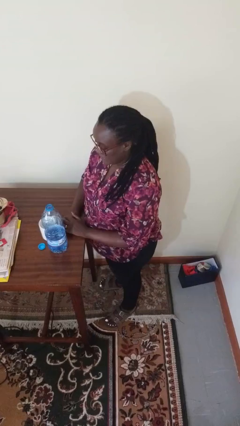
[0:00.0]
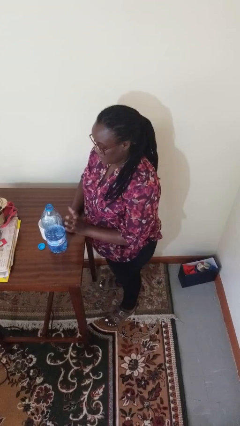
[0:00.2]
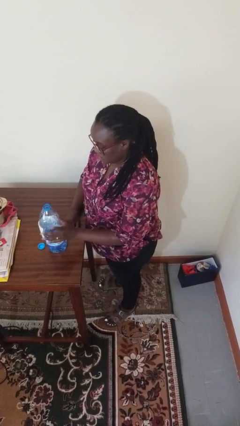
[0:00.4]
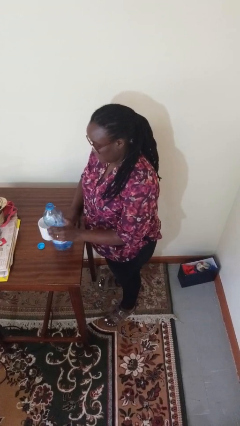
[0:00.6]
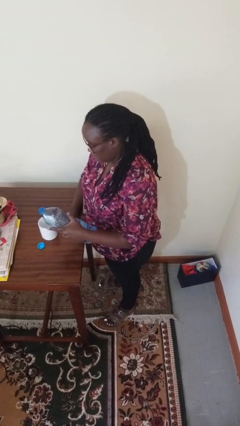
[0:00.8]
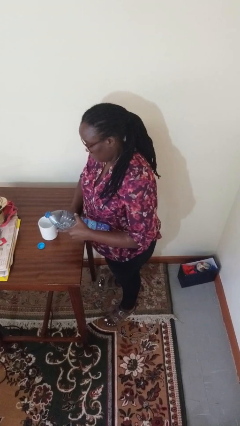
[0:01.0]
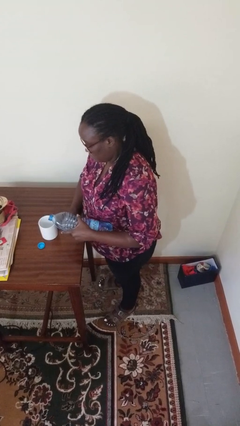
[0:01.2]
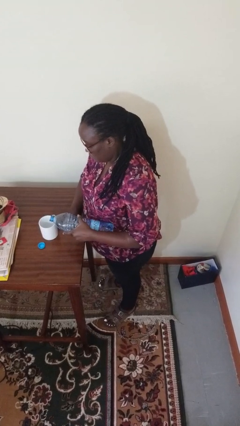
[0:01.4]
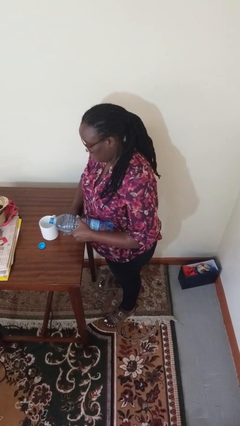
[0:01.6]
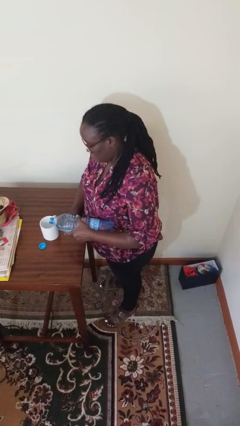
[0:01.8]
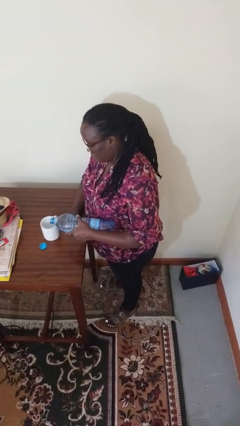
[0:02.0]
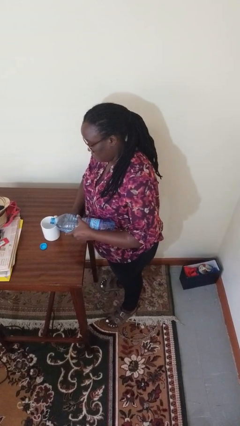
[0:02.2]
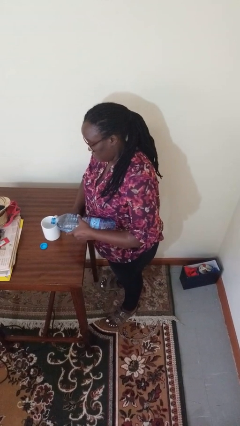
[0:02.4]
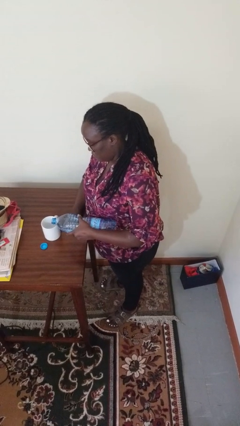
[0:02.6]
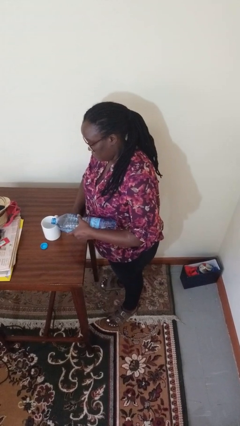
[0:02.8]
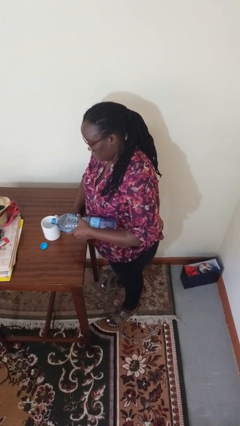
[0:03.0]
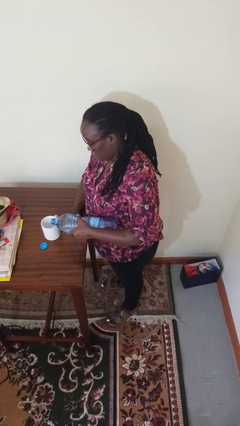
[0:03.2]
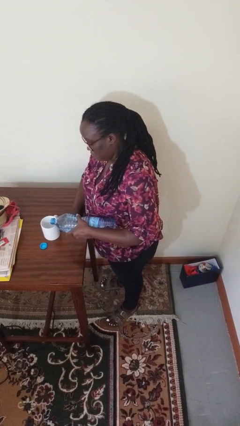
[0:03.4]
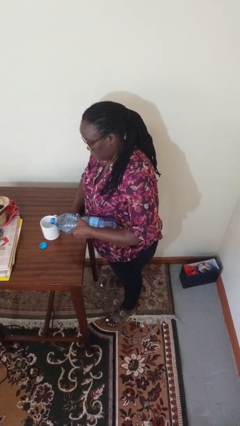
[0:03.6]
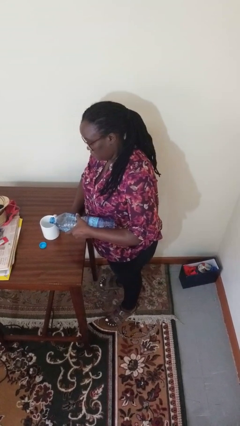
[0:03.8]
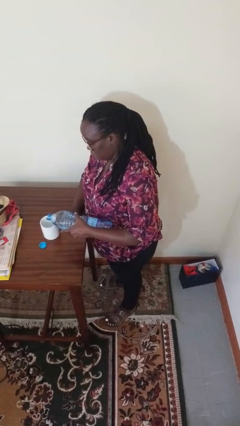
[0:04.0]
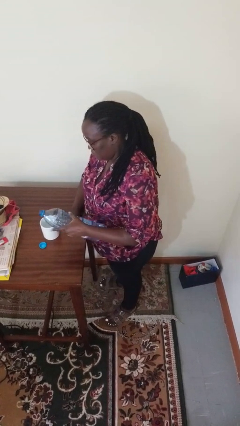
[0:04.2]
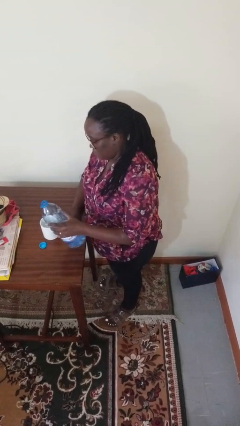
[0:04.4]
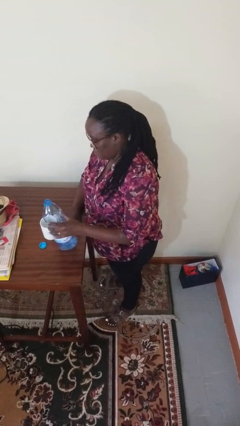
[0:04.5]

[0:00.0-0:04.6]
person pours liquid into cup

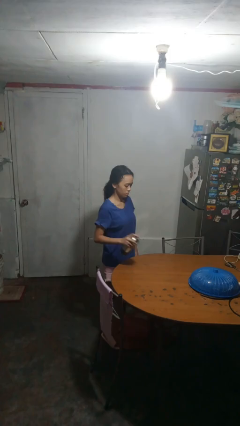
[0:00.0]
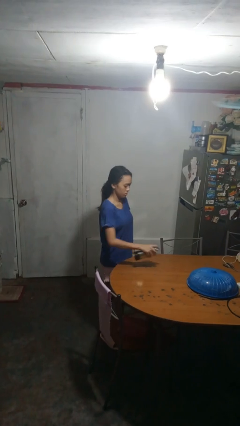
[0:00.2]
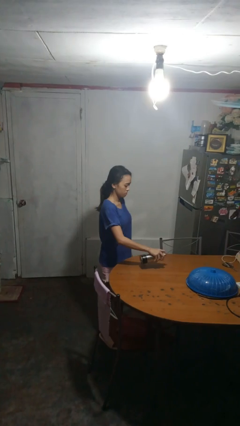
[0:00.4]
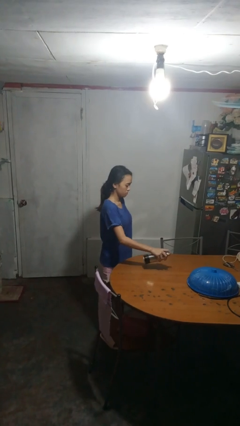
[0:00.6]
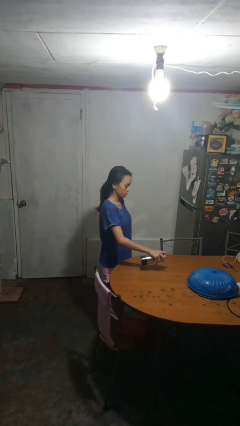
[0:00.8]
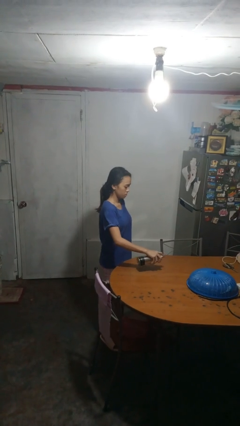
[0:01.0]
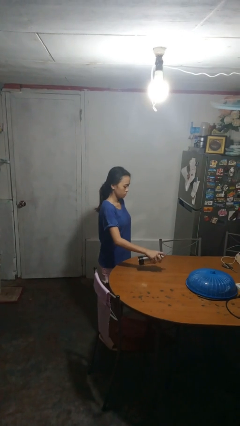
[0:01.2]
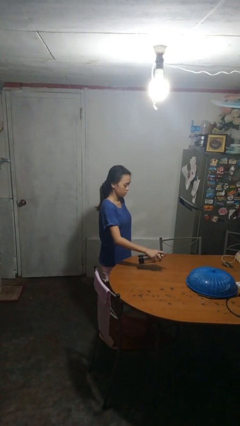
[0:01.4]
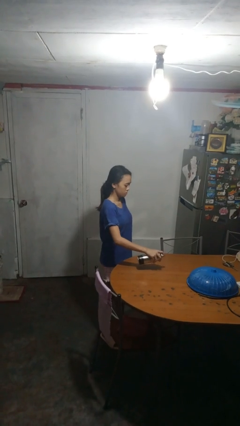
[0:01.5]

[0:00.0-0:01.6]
person sprays from bottle

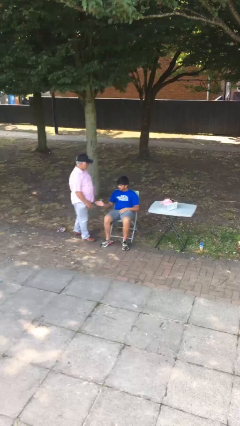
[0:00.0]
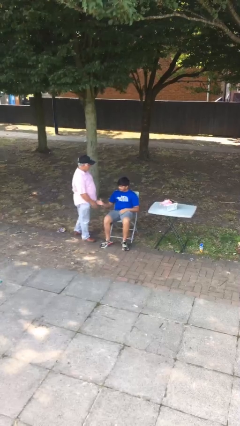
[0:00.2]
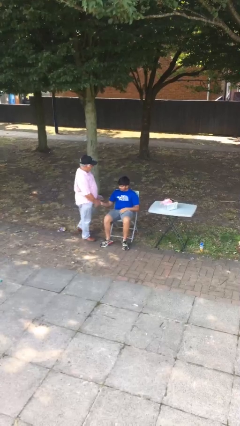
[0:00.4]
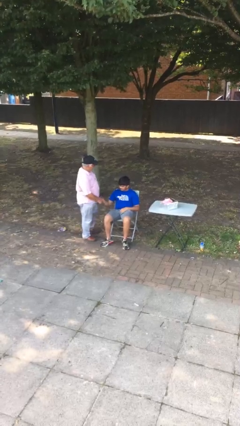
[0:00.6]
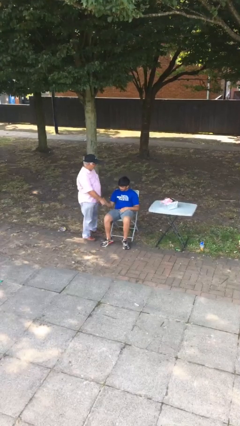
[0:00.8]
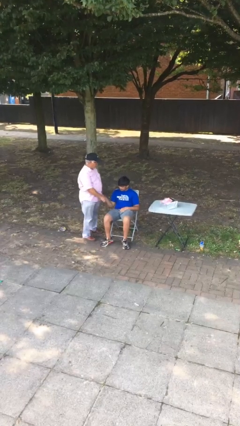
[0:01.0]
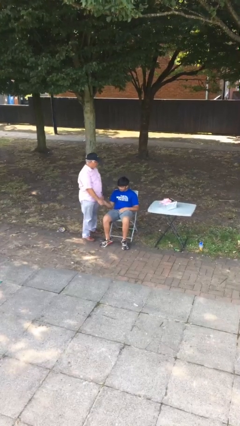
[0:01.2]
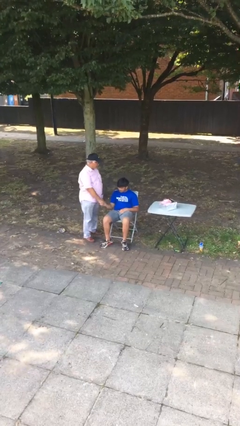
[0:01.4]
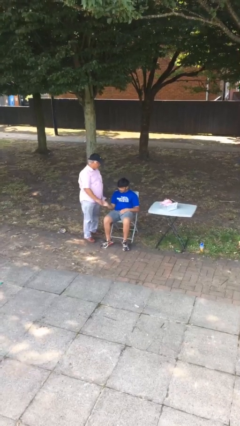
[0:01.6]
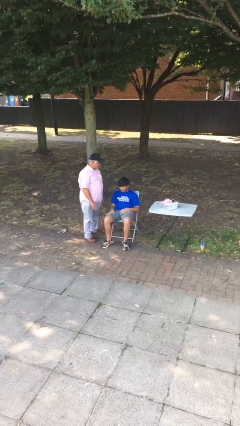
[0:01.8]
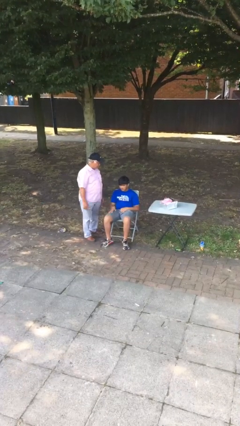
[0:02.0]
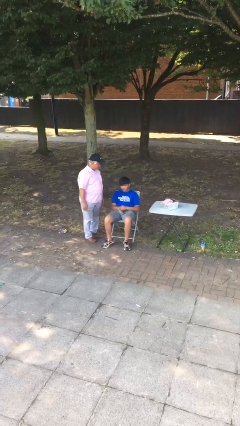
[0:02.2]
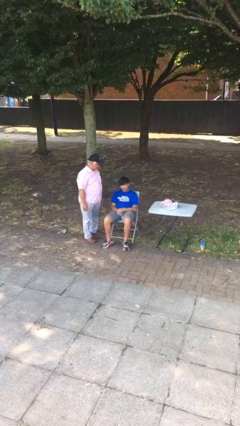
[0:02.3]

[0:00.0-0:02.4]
person shakes hand

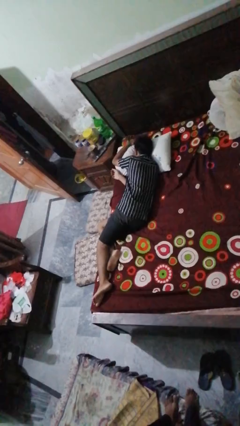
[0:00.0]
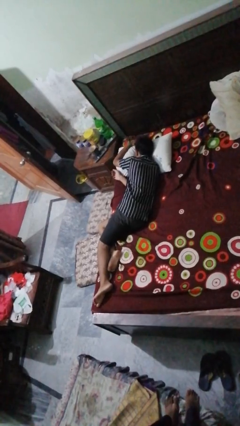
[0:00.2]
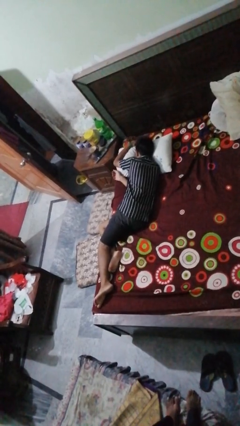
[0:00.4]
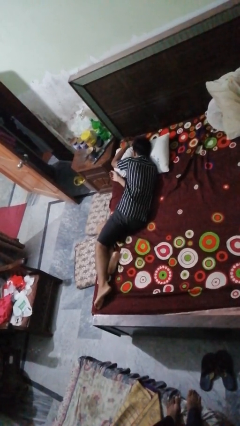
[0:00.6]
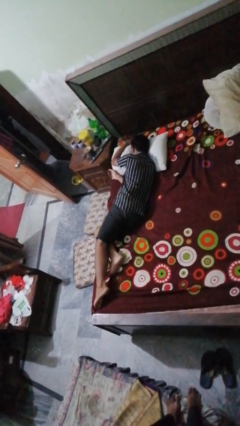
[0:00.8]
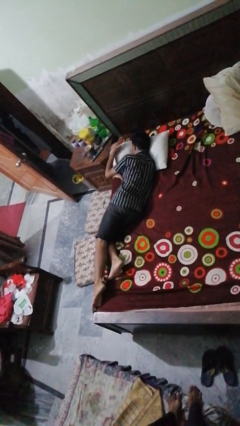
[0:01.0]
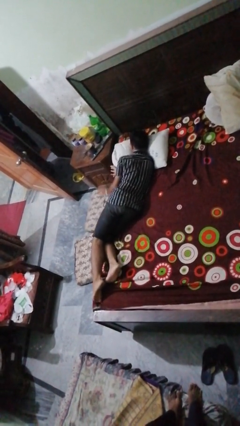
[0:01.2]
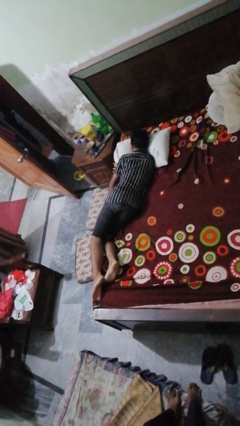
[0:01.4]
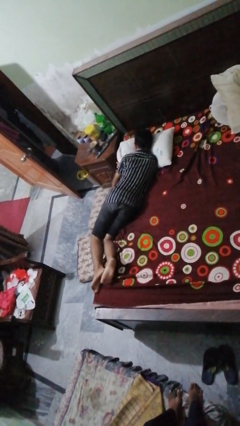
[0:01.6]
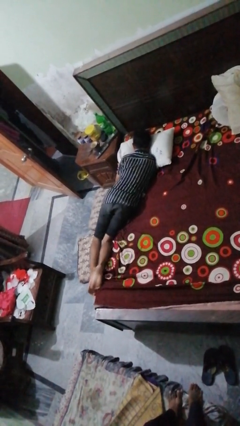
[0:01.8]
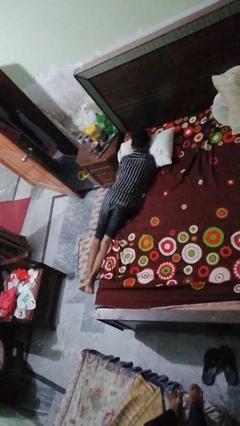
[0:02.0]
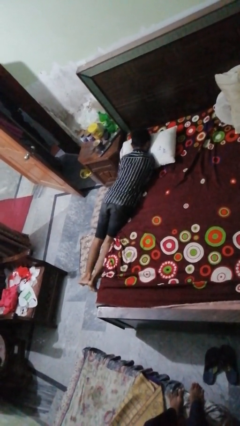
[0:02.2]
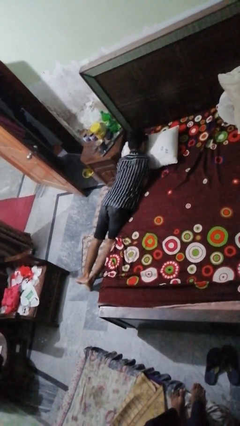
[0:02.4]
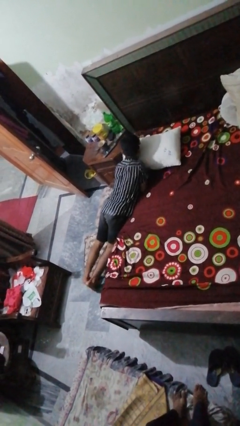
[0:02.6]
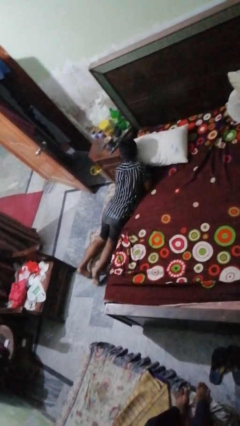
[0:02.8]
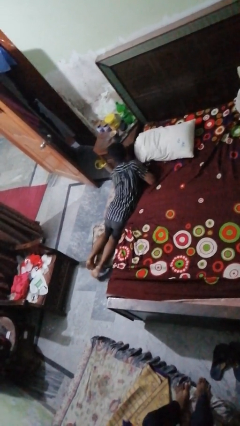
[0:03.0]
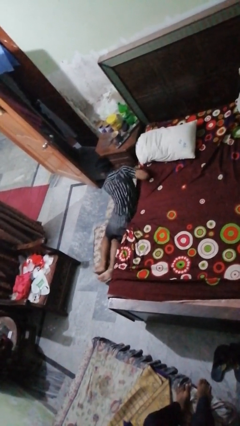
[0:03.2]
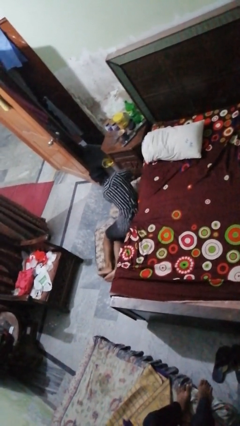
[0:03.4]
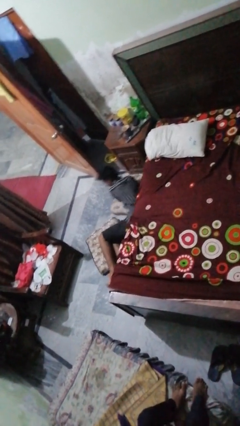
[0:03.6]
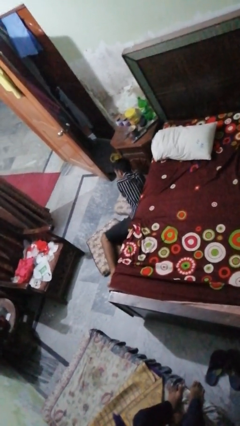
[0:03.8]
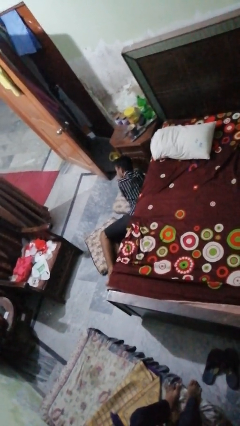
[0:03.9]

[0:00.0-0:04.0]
person falls from bed

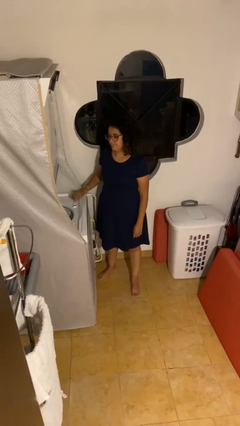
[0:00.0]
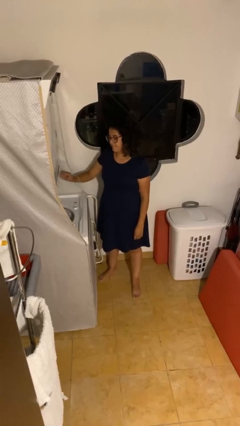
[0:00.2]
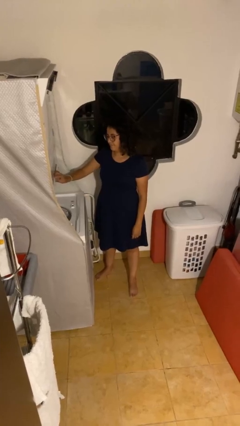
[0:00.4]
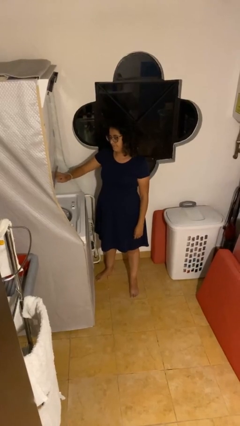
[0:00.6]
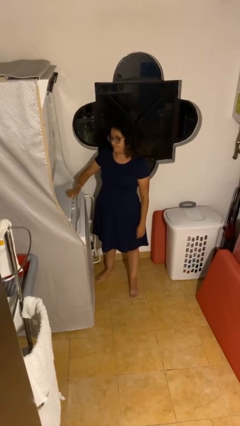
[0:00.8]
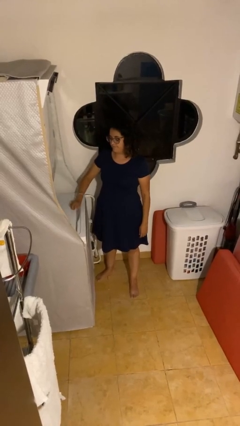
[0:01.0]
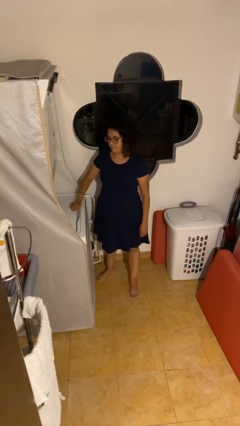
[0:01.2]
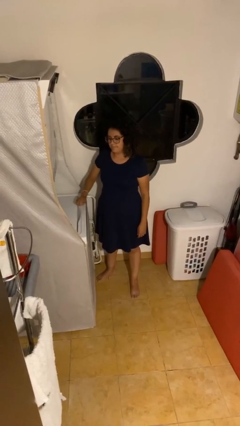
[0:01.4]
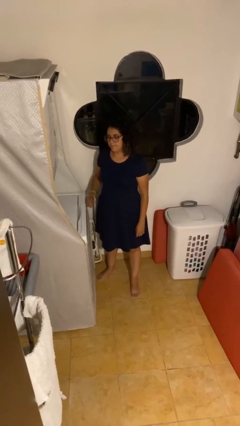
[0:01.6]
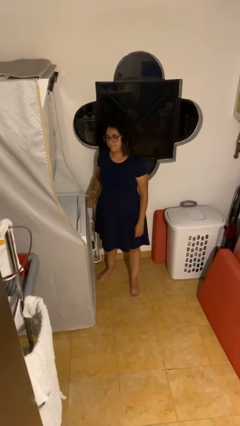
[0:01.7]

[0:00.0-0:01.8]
person closes clothes washer

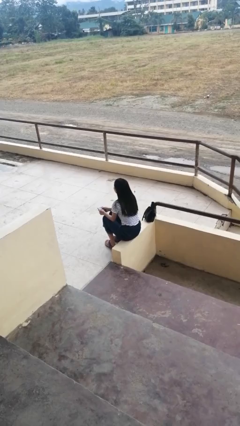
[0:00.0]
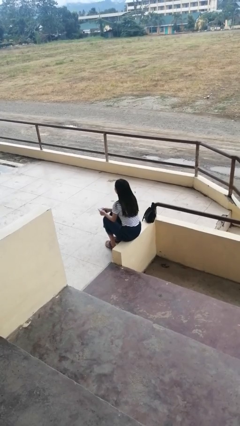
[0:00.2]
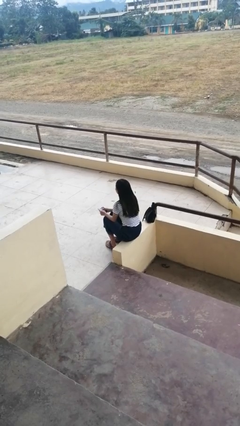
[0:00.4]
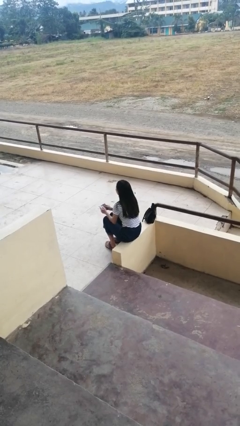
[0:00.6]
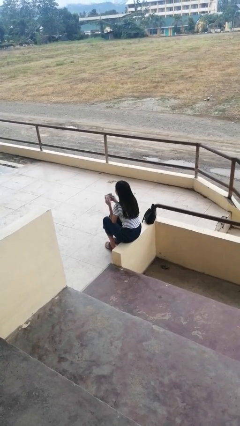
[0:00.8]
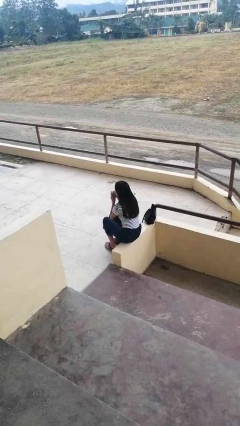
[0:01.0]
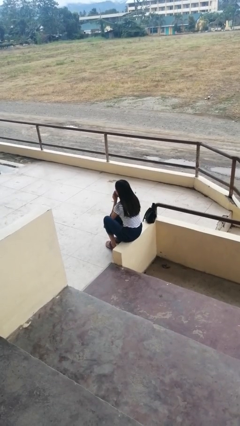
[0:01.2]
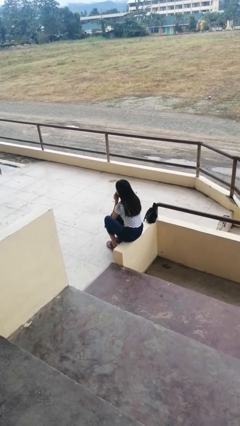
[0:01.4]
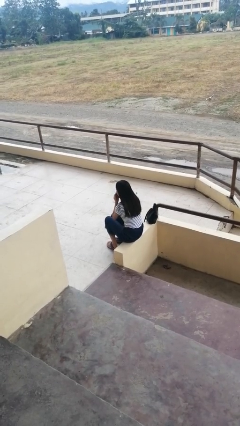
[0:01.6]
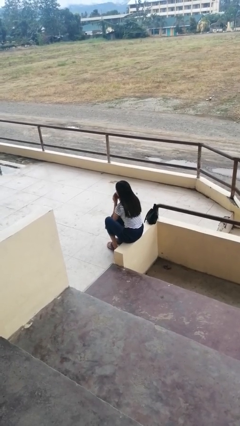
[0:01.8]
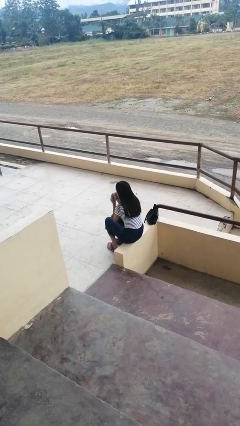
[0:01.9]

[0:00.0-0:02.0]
person blows nose

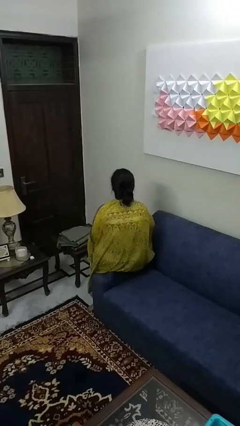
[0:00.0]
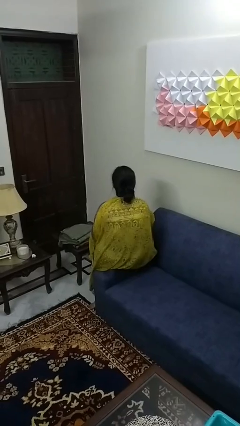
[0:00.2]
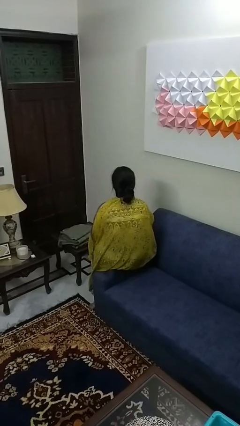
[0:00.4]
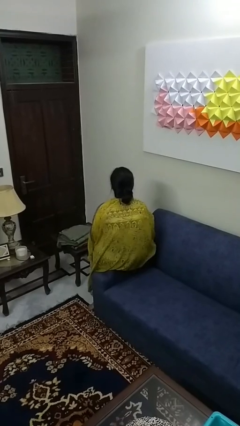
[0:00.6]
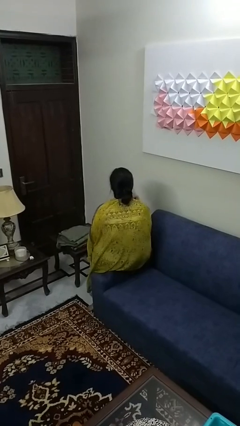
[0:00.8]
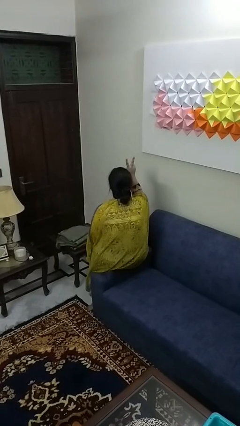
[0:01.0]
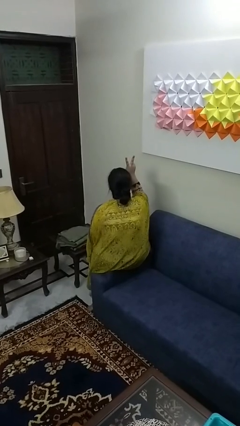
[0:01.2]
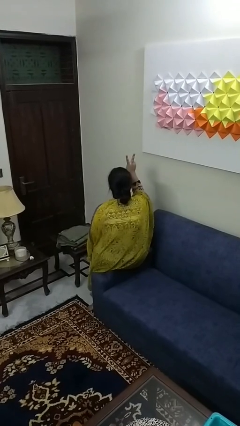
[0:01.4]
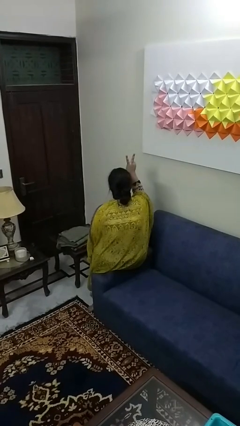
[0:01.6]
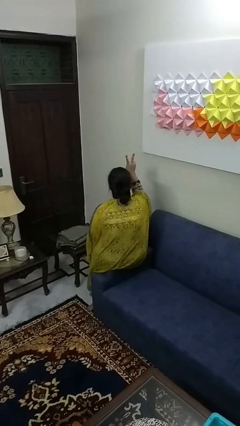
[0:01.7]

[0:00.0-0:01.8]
person gestures peace
